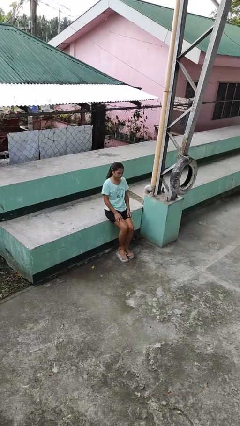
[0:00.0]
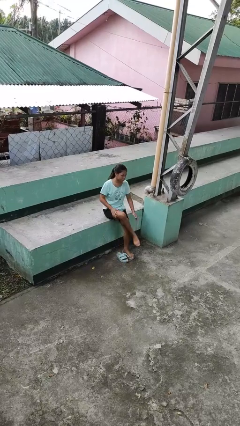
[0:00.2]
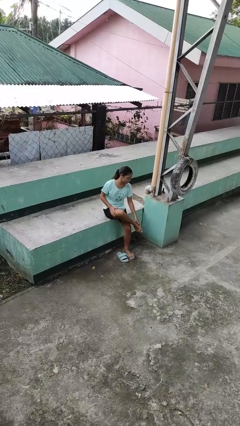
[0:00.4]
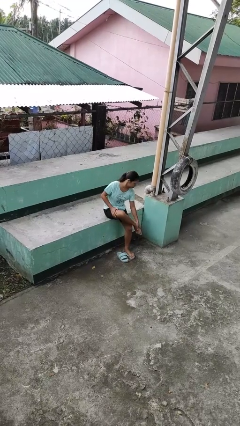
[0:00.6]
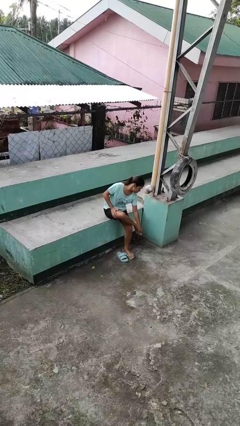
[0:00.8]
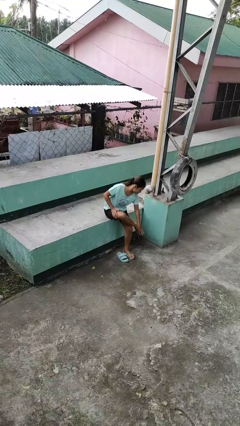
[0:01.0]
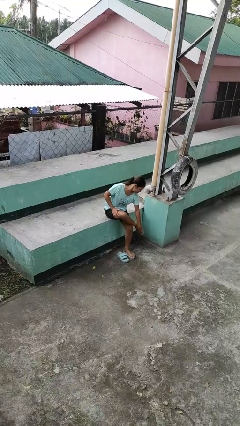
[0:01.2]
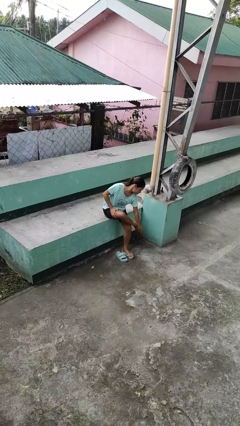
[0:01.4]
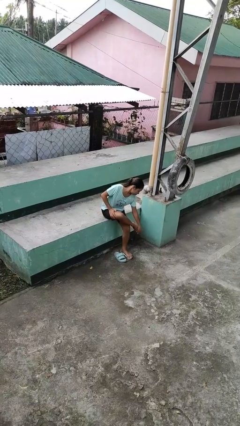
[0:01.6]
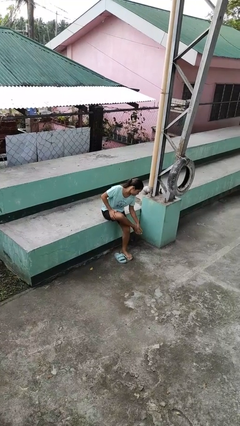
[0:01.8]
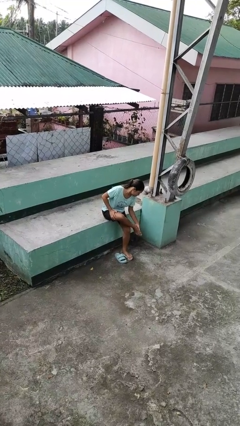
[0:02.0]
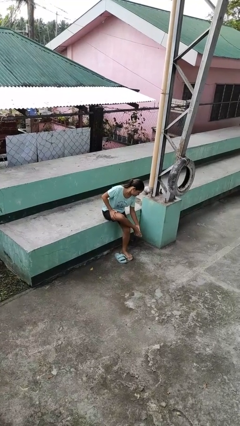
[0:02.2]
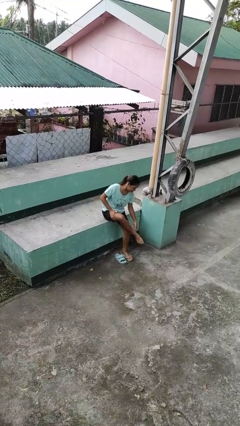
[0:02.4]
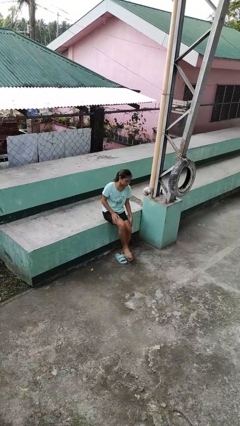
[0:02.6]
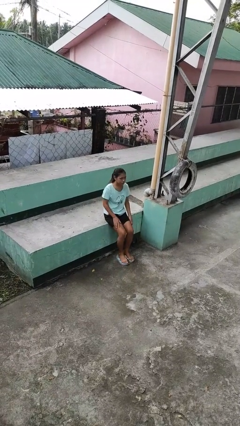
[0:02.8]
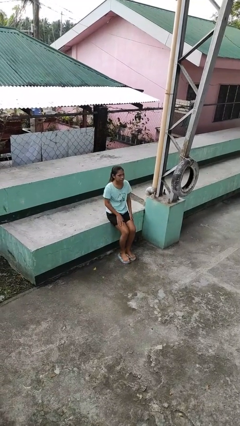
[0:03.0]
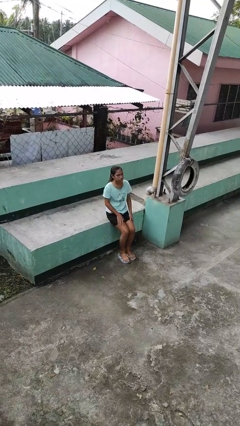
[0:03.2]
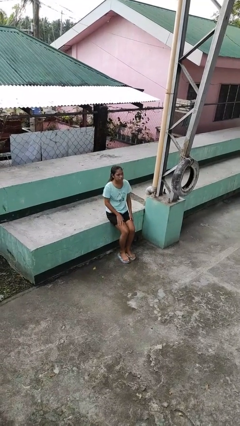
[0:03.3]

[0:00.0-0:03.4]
person rubs foot

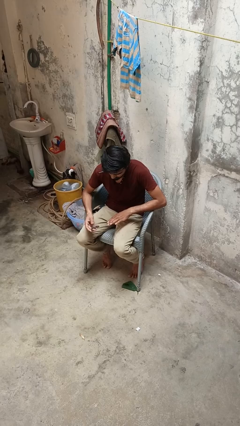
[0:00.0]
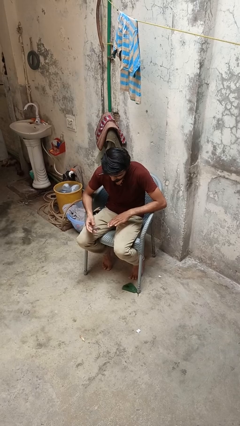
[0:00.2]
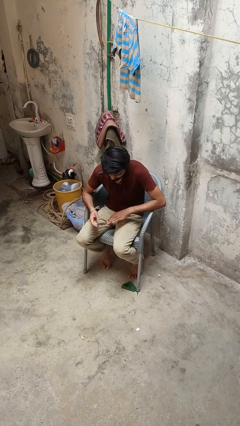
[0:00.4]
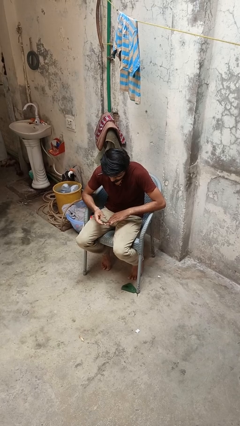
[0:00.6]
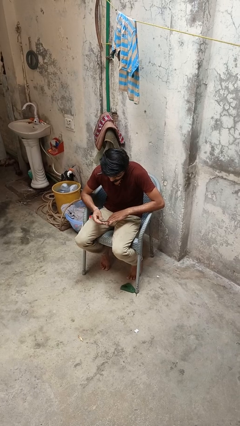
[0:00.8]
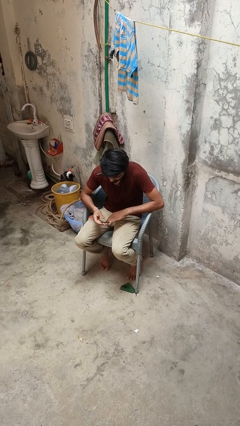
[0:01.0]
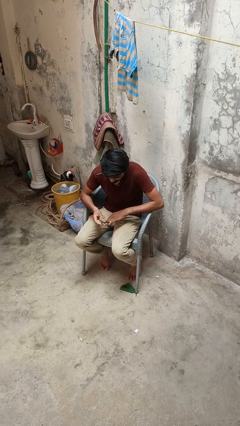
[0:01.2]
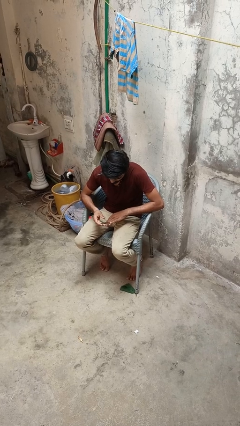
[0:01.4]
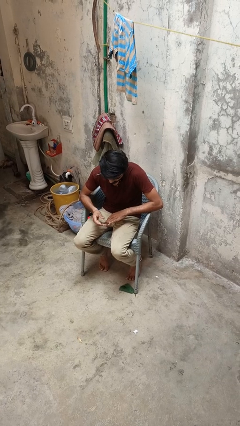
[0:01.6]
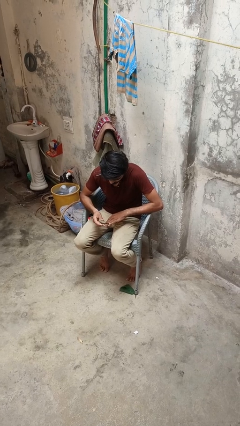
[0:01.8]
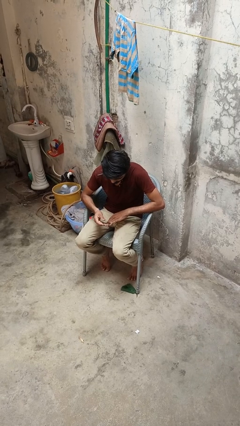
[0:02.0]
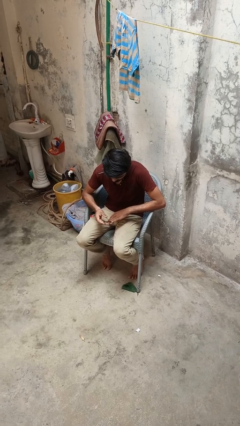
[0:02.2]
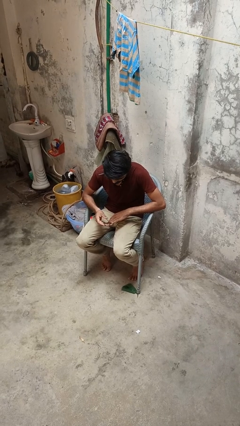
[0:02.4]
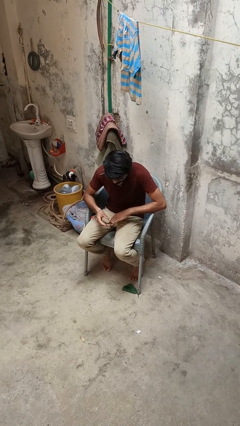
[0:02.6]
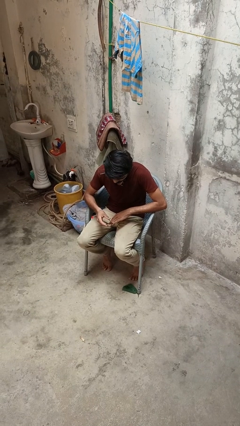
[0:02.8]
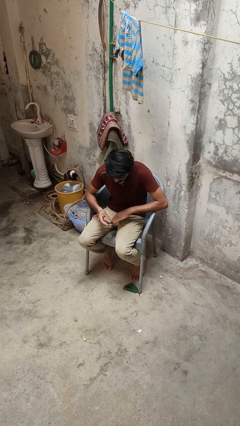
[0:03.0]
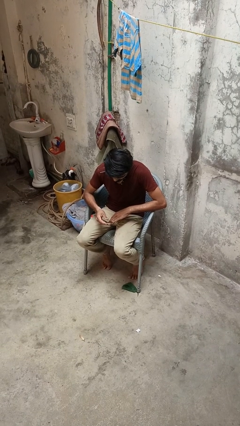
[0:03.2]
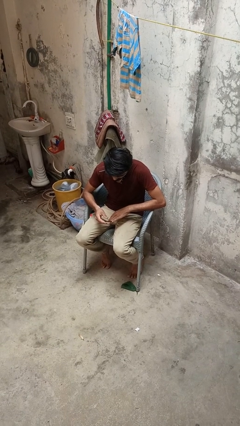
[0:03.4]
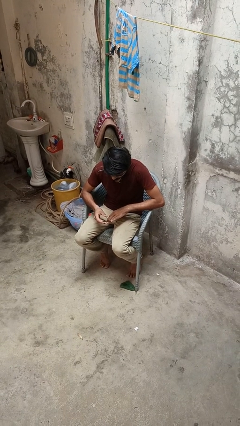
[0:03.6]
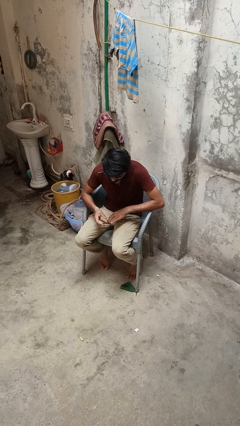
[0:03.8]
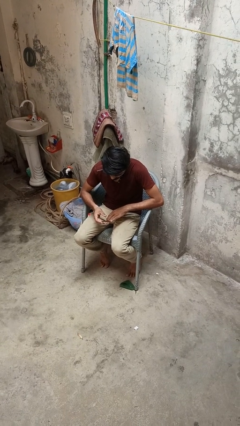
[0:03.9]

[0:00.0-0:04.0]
person clips fingernails

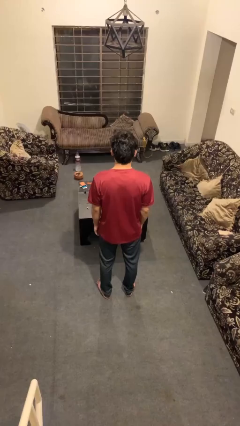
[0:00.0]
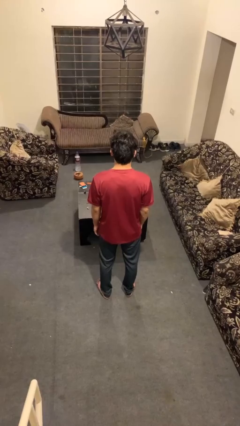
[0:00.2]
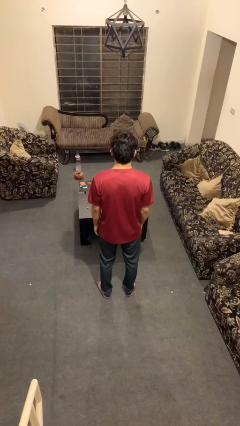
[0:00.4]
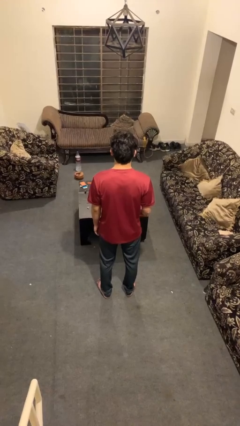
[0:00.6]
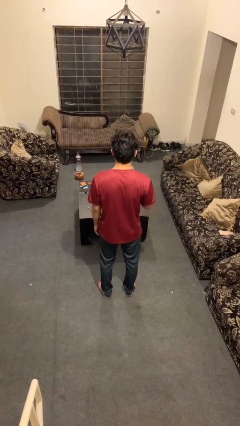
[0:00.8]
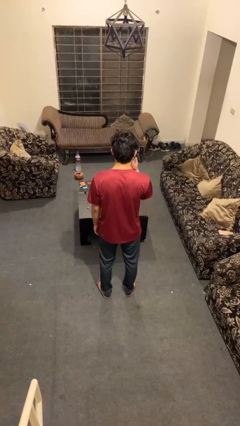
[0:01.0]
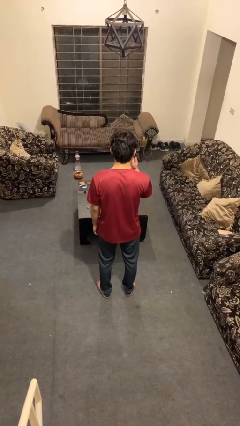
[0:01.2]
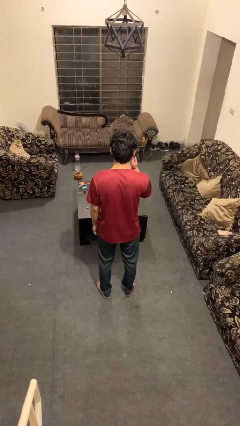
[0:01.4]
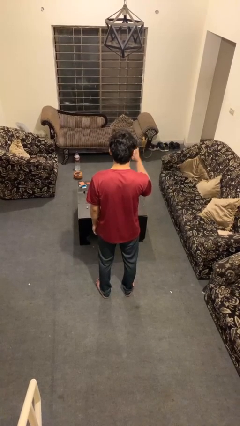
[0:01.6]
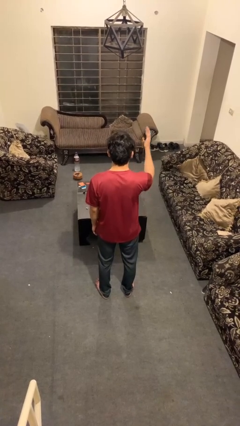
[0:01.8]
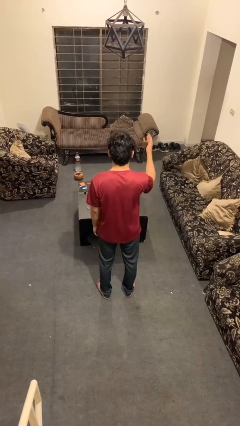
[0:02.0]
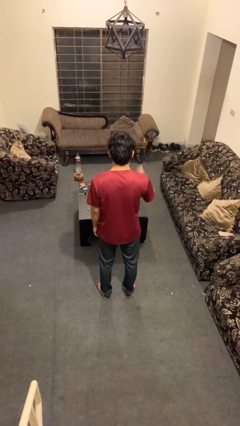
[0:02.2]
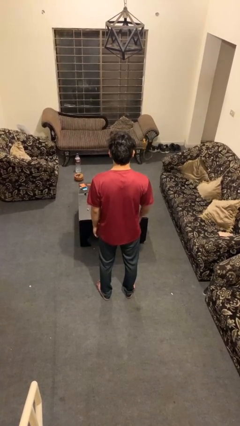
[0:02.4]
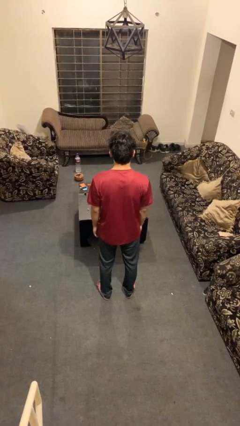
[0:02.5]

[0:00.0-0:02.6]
person gestures blow kiss

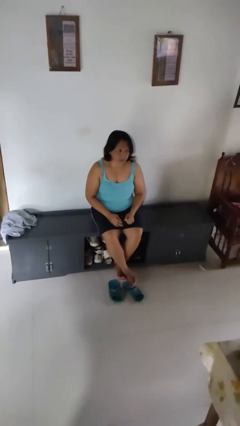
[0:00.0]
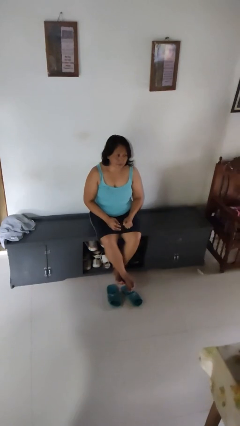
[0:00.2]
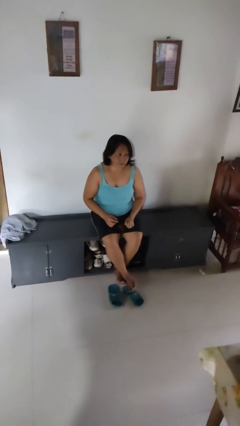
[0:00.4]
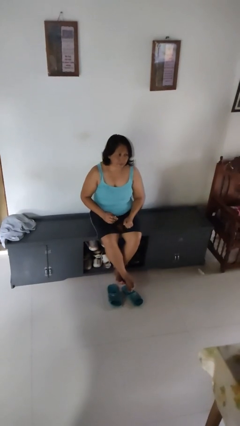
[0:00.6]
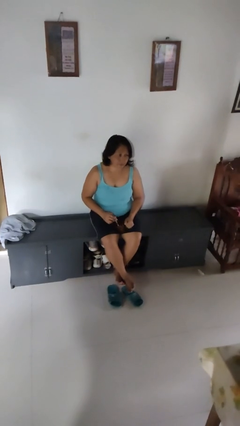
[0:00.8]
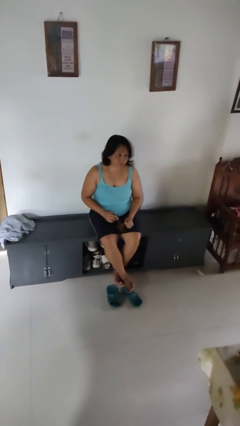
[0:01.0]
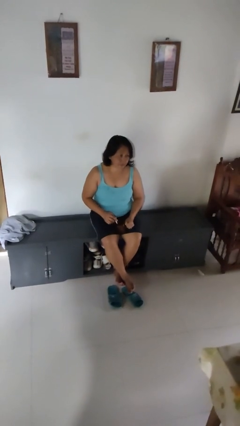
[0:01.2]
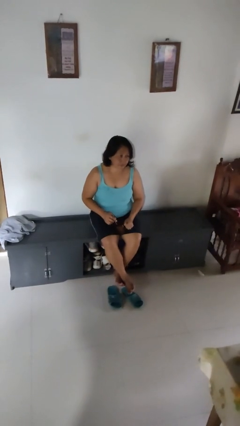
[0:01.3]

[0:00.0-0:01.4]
person stirs mug

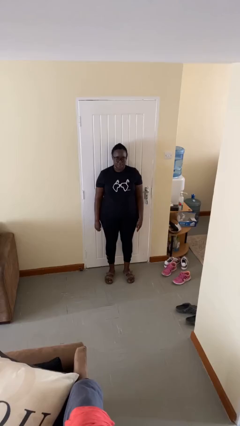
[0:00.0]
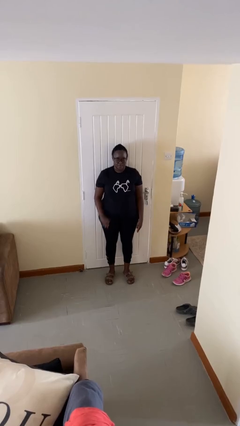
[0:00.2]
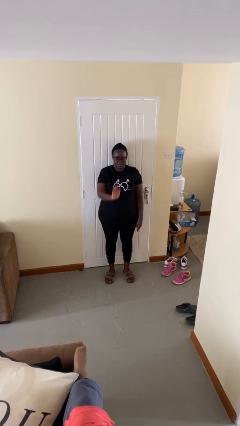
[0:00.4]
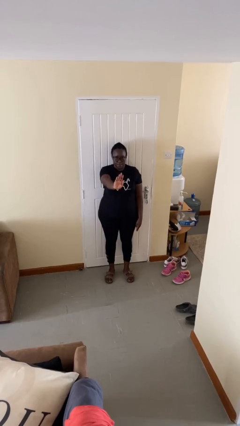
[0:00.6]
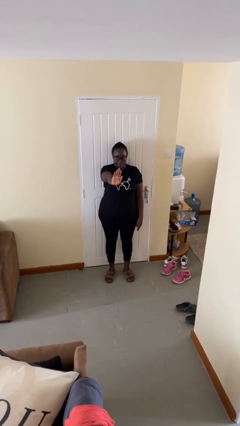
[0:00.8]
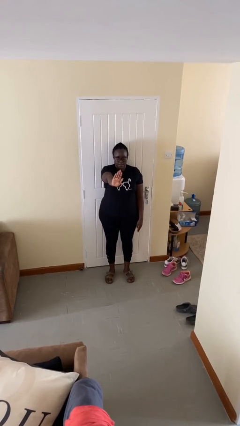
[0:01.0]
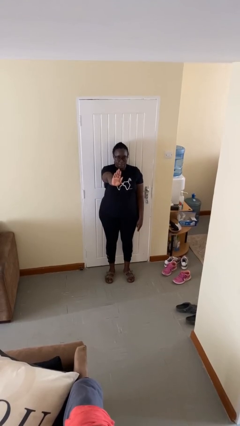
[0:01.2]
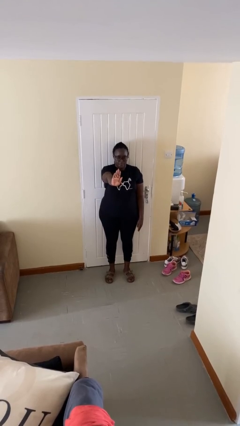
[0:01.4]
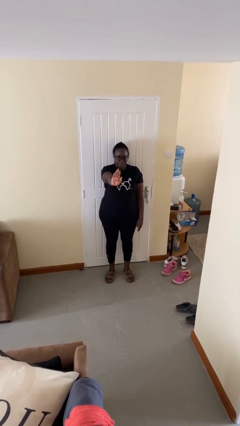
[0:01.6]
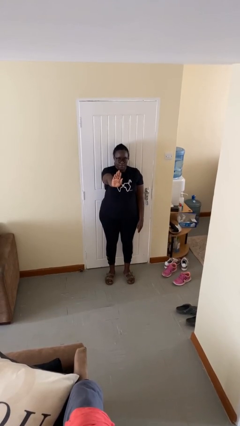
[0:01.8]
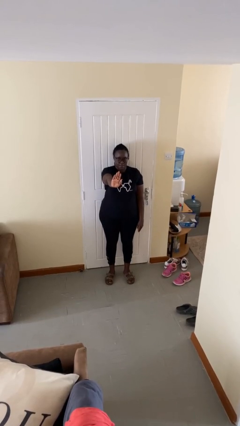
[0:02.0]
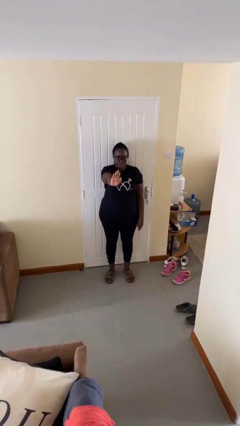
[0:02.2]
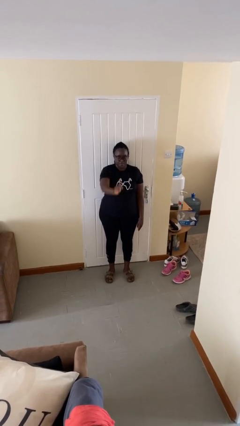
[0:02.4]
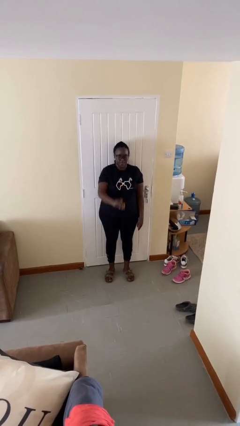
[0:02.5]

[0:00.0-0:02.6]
person gestures stop

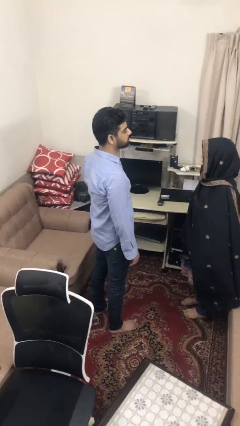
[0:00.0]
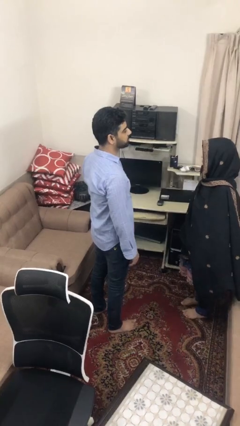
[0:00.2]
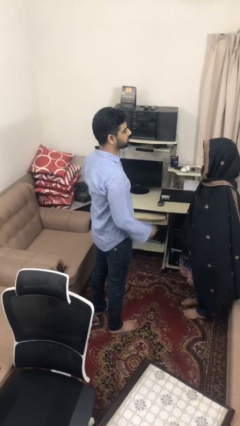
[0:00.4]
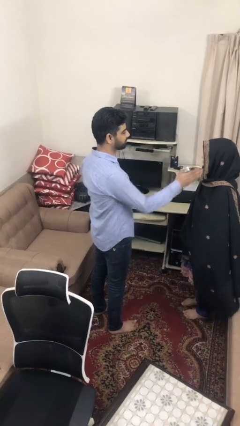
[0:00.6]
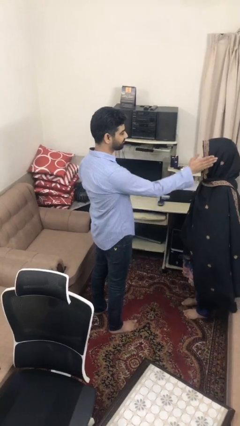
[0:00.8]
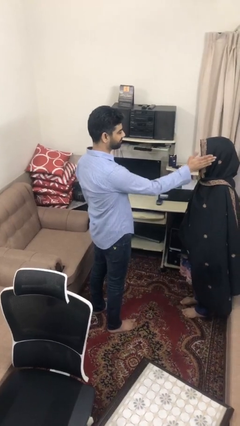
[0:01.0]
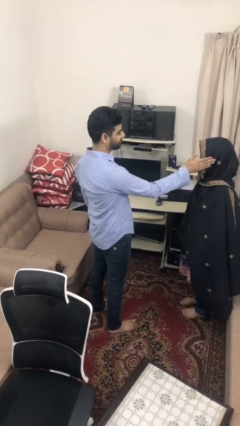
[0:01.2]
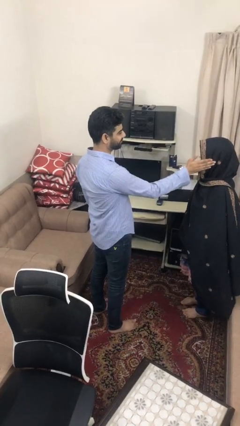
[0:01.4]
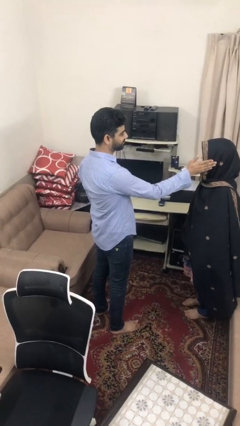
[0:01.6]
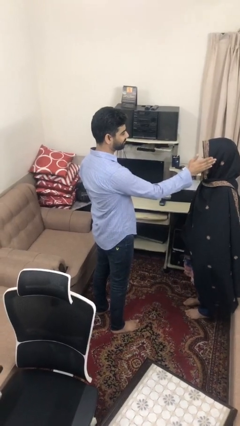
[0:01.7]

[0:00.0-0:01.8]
person touches face of person

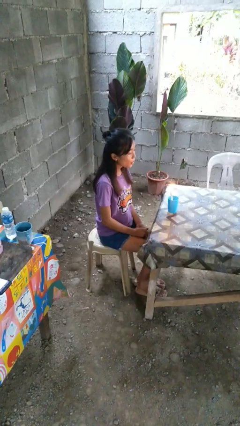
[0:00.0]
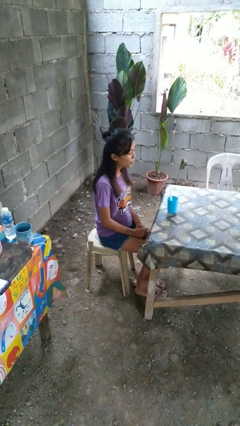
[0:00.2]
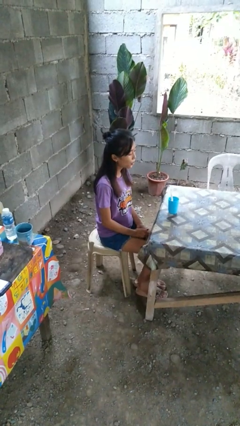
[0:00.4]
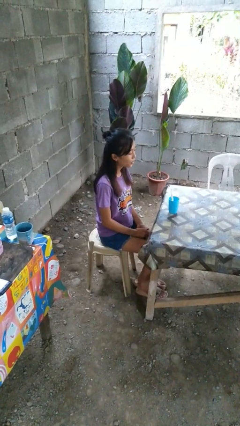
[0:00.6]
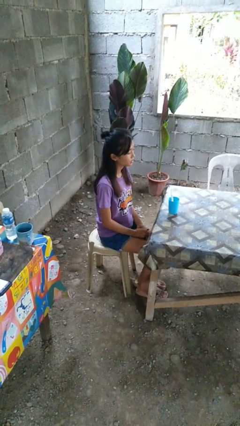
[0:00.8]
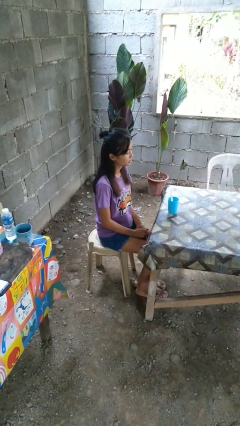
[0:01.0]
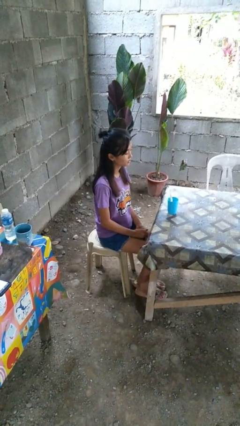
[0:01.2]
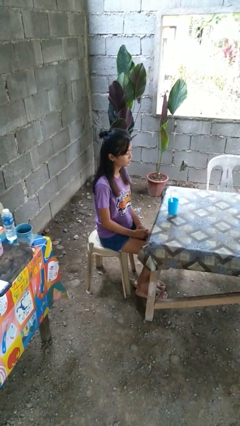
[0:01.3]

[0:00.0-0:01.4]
person extinguishes candle

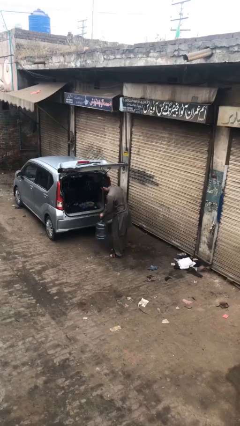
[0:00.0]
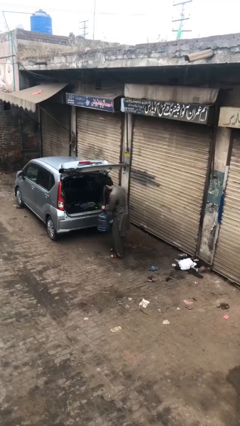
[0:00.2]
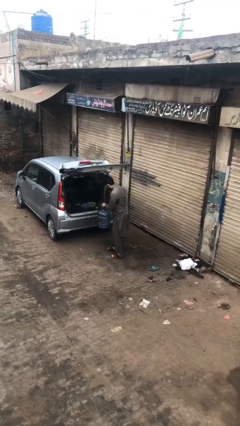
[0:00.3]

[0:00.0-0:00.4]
person loads car
